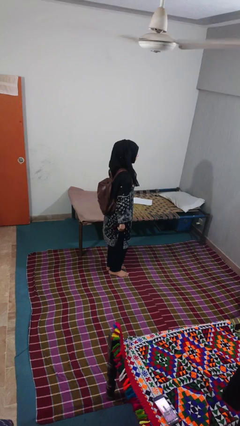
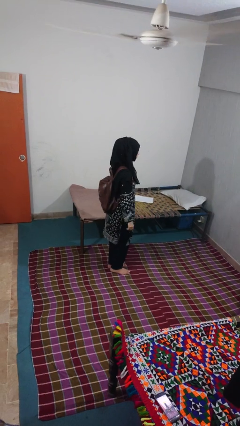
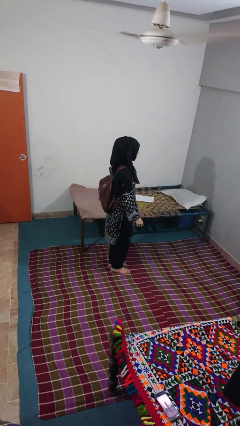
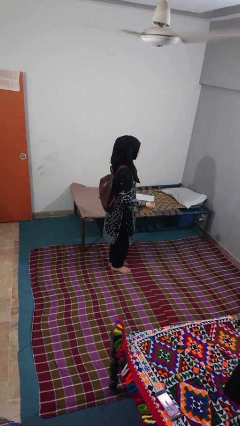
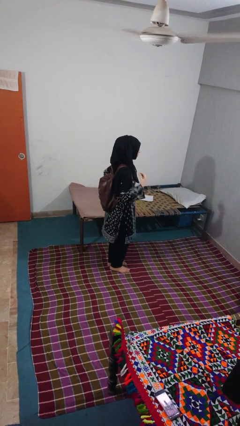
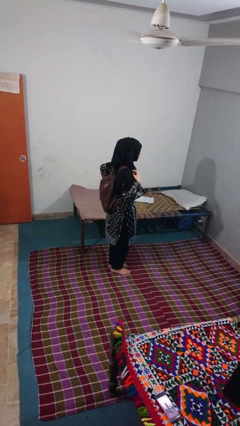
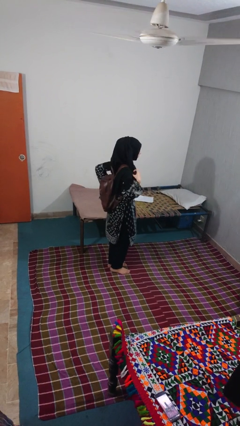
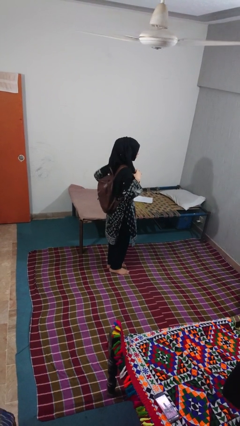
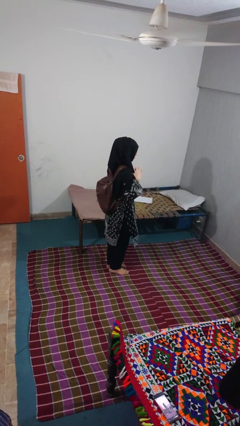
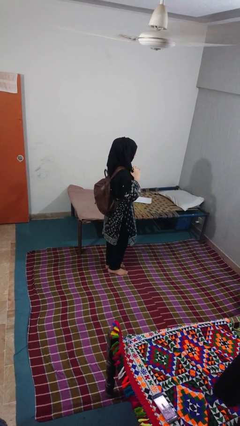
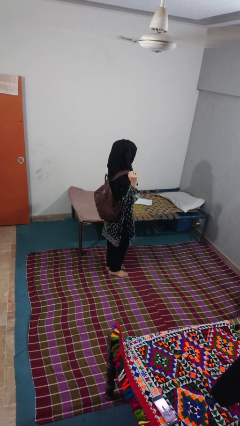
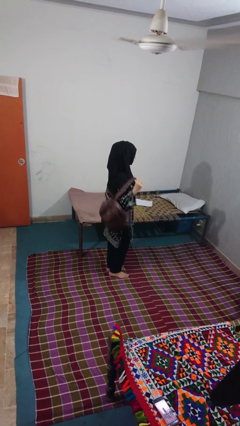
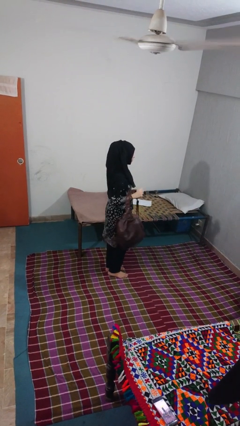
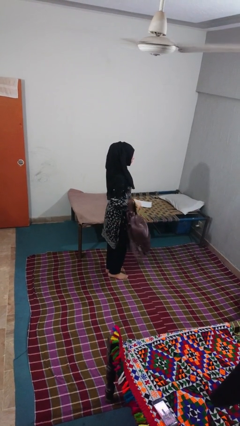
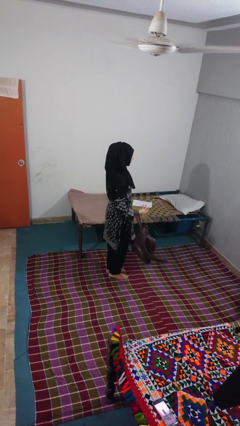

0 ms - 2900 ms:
person takes off backpack

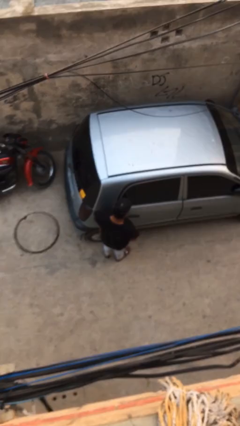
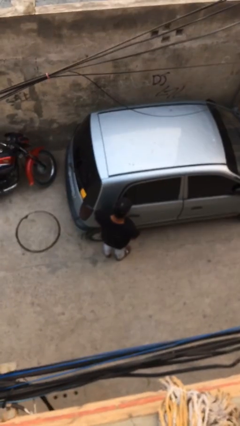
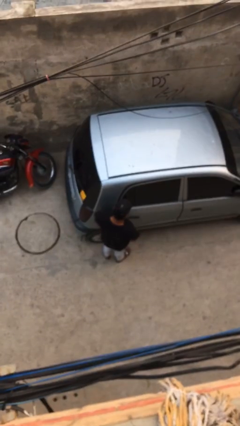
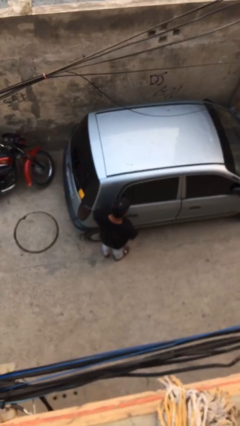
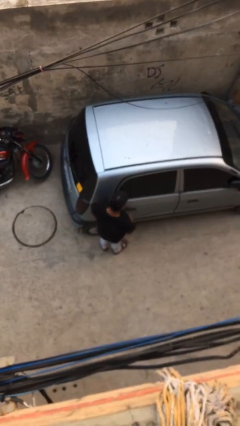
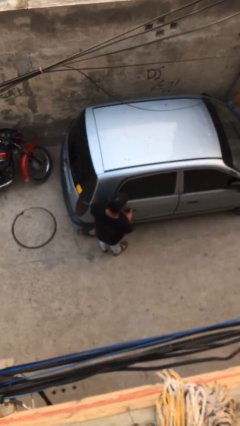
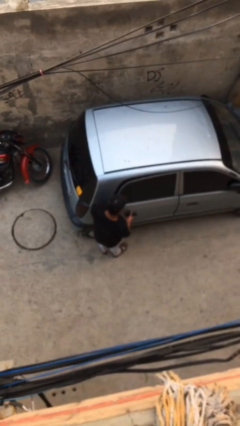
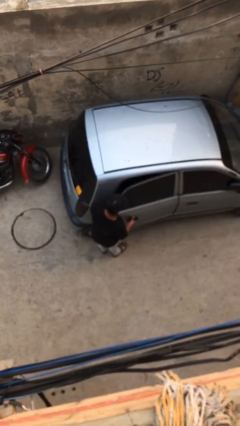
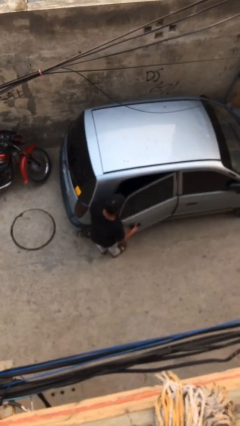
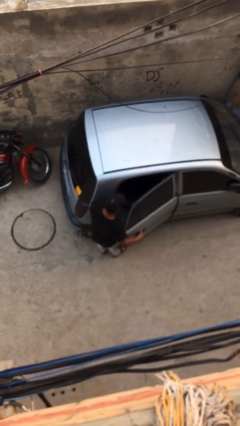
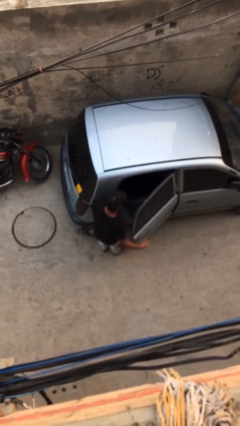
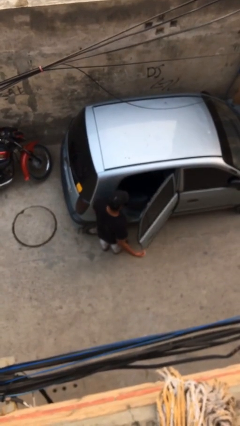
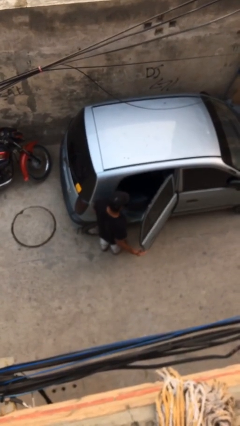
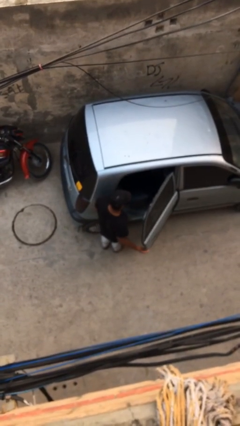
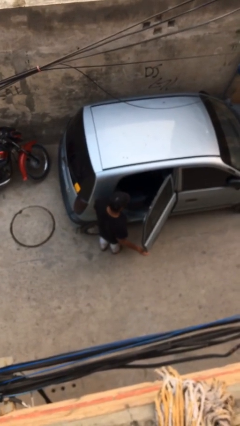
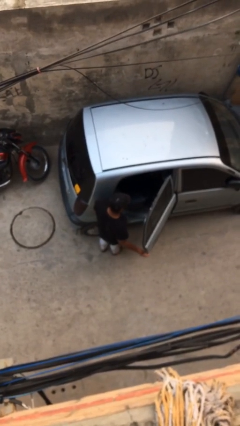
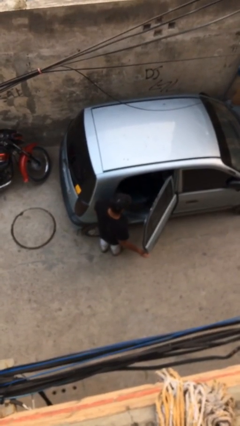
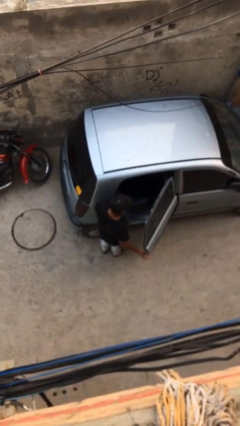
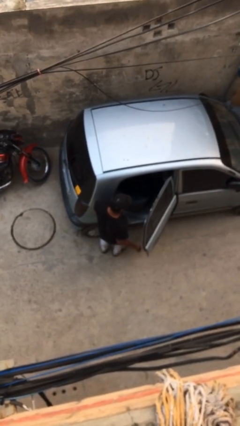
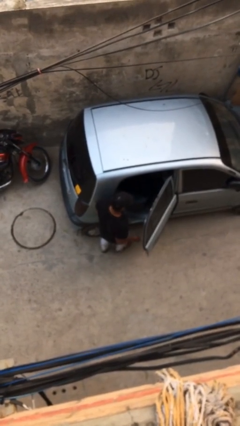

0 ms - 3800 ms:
person opens car door

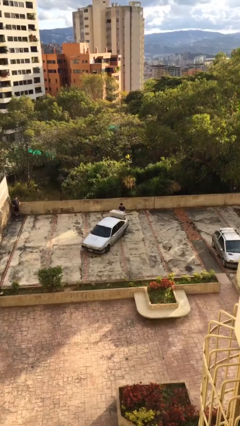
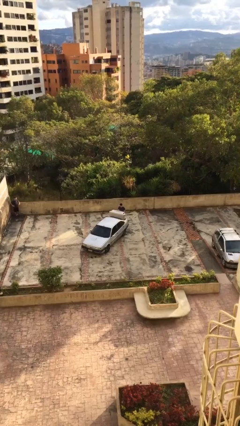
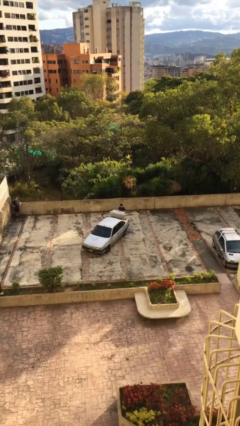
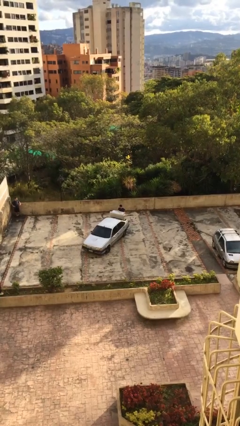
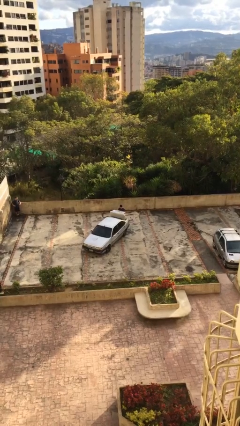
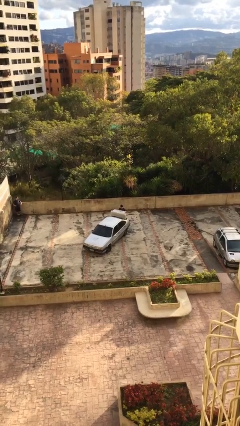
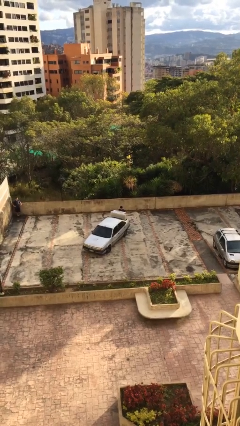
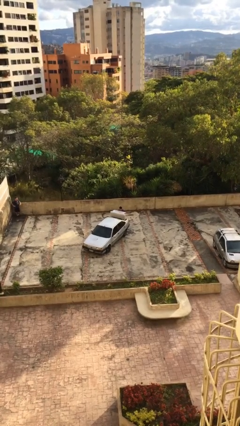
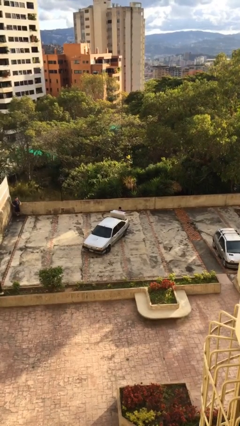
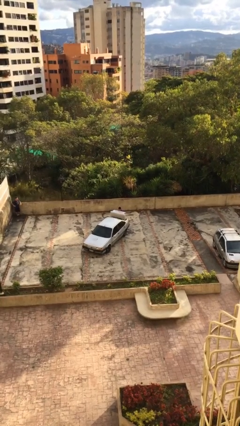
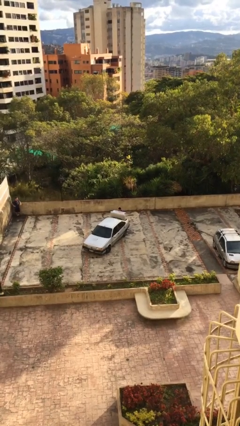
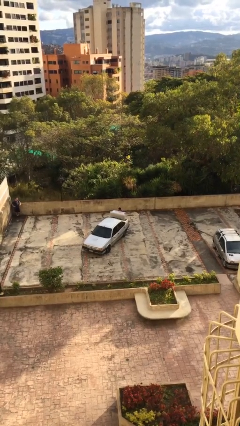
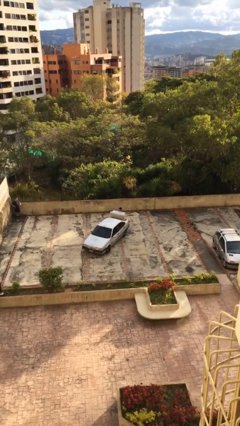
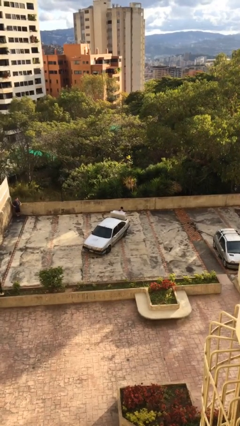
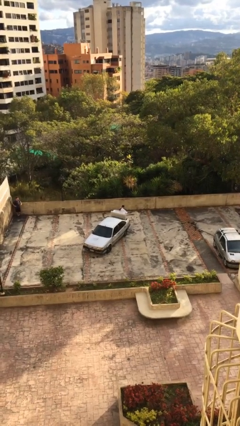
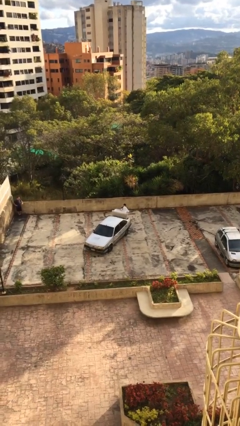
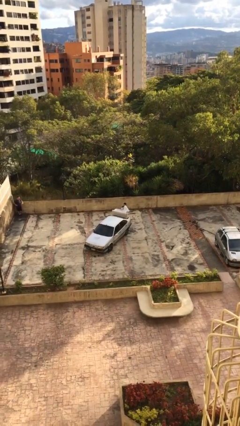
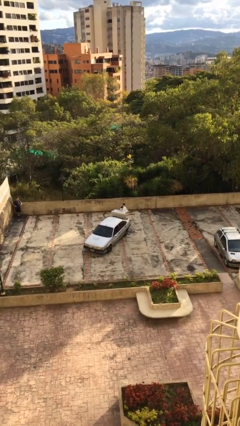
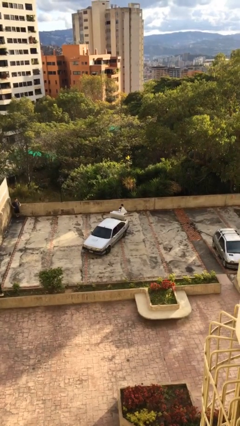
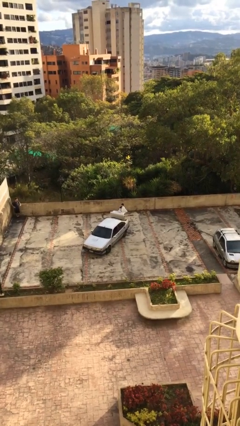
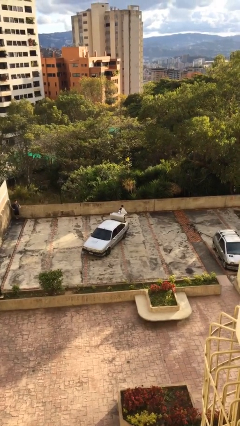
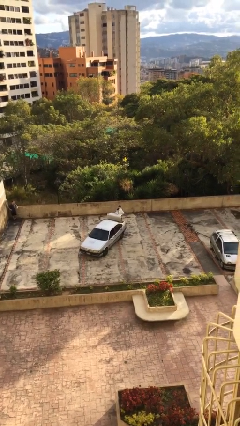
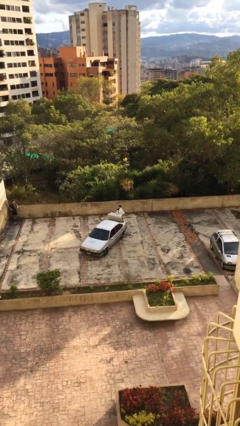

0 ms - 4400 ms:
person unloads car

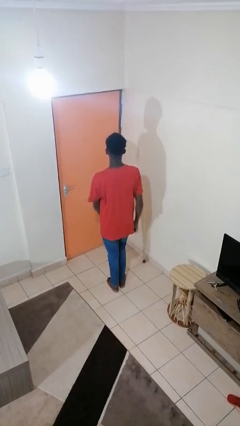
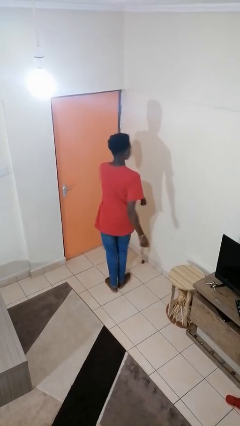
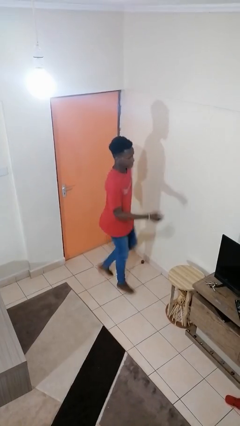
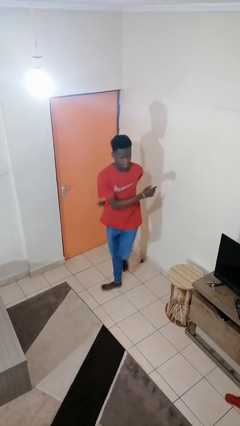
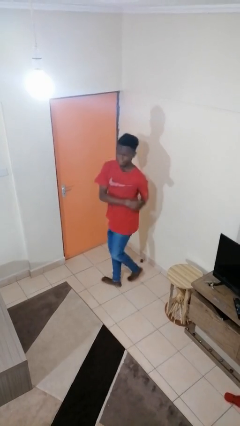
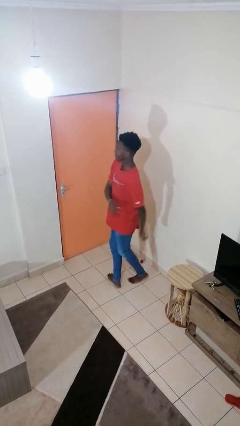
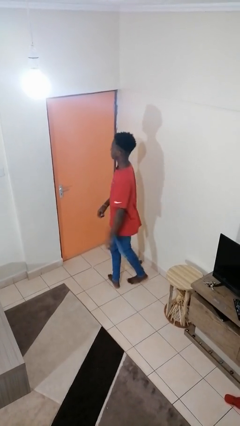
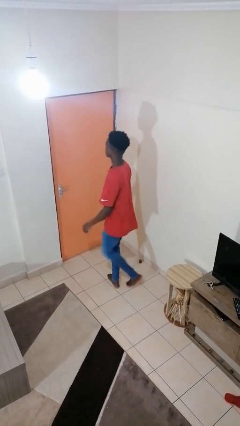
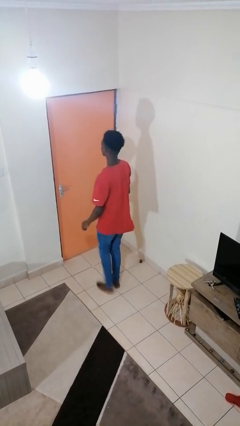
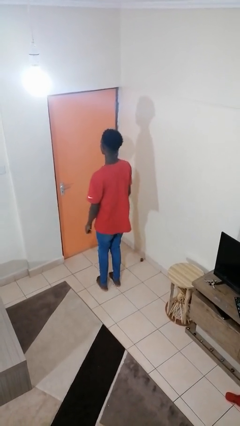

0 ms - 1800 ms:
person twirls

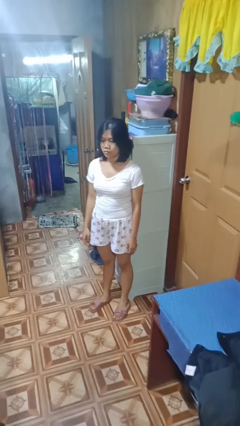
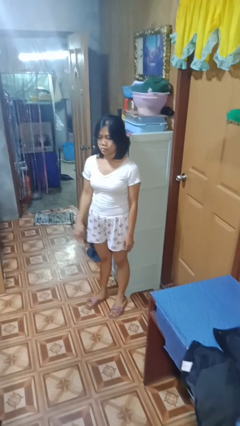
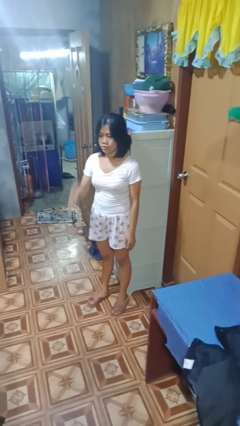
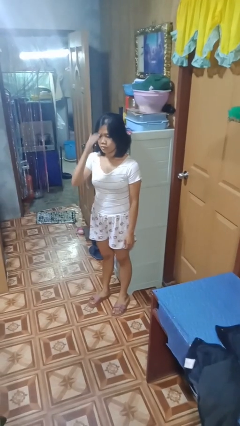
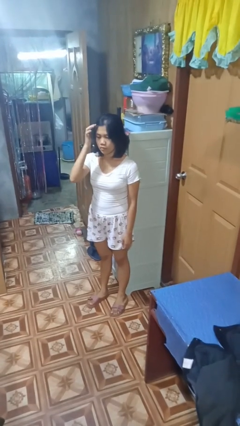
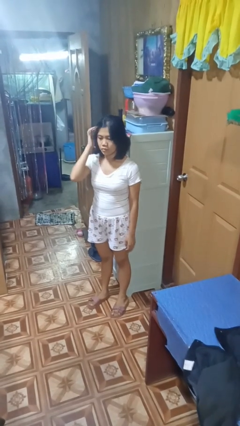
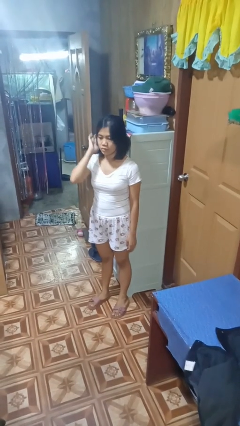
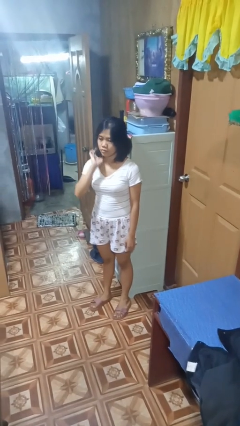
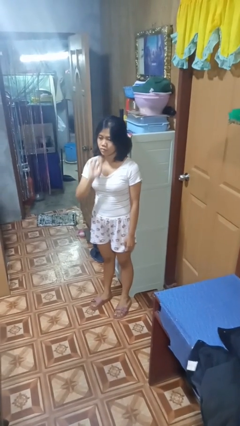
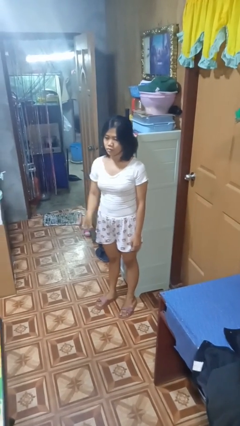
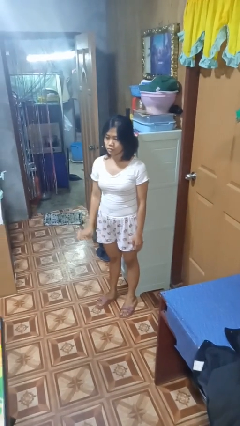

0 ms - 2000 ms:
person strokes hair

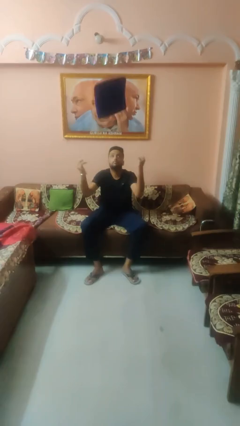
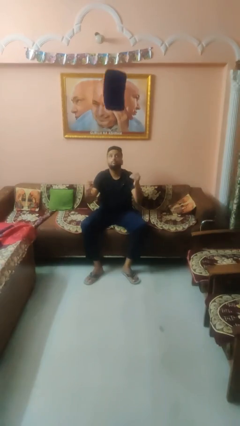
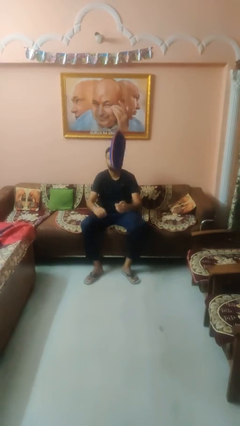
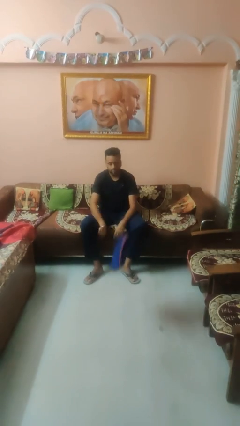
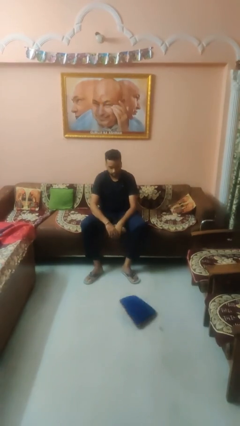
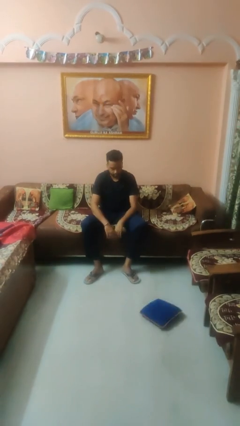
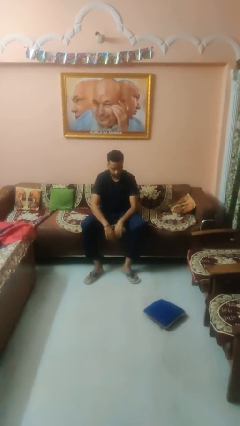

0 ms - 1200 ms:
person throws object into air

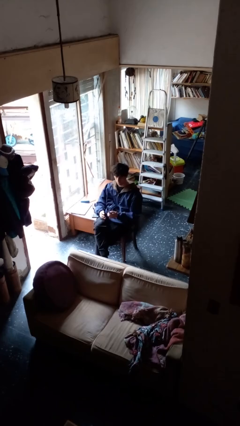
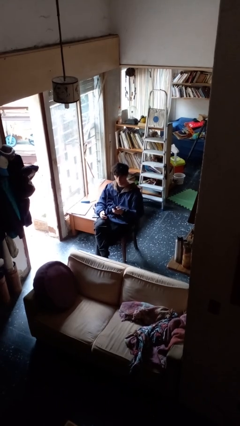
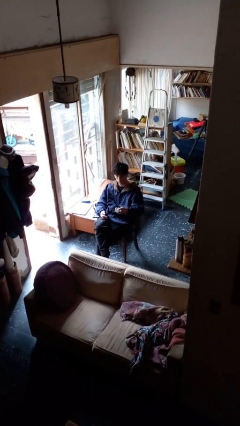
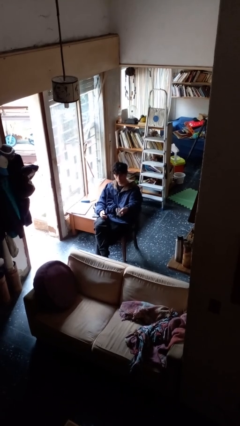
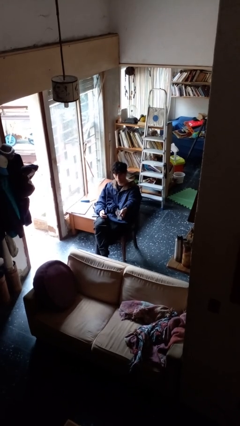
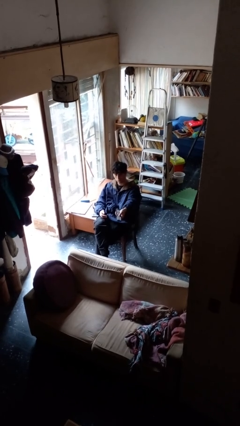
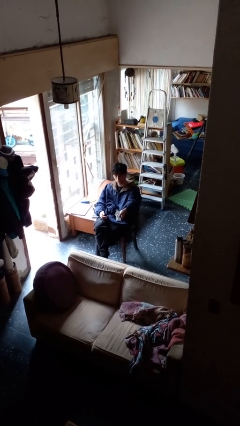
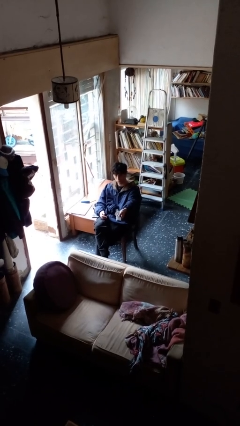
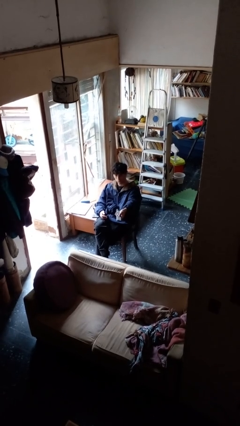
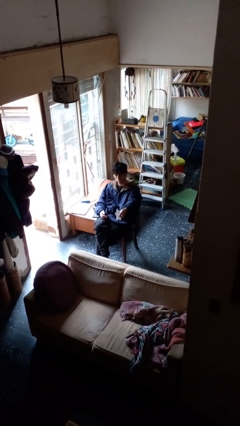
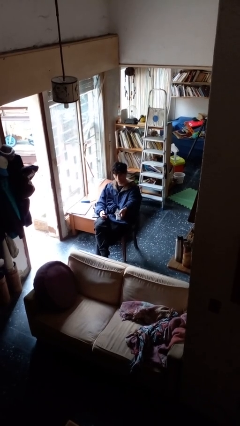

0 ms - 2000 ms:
person uses television remote
